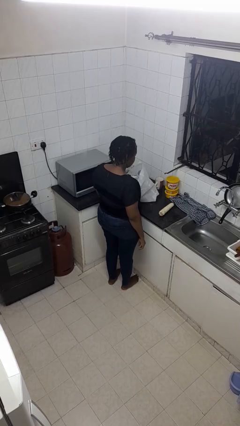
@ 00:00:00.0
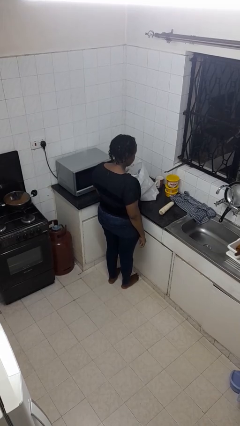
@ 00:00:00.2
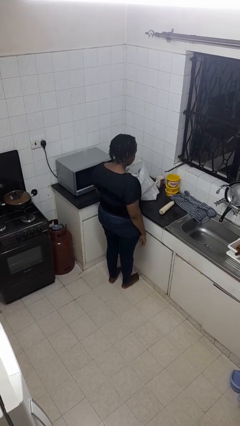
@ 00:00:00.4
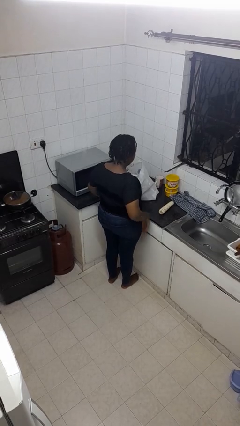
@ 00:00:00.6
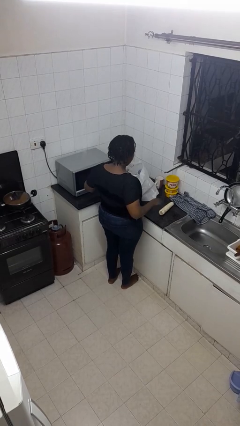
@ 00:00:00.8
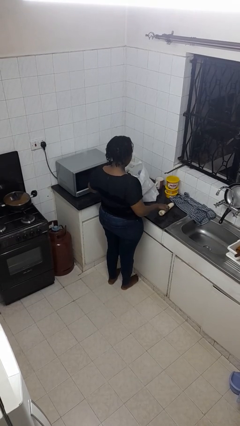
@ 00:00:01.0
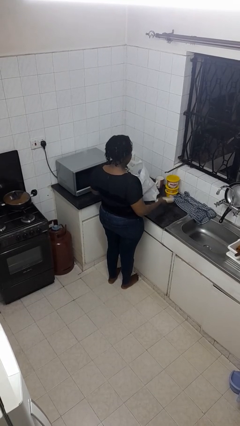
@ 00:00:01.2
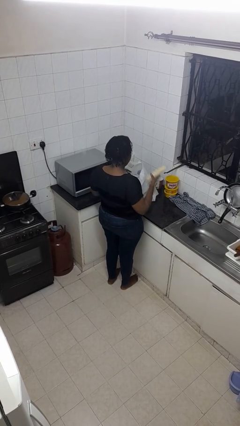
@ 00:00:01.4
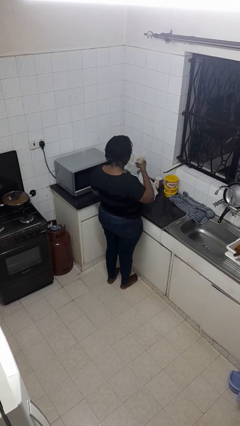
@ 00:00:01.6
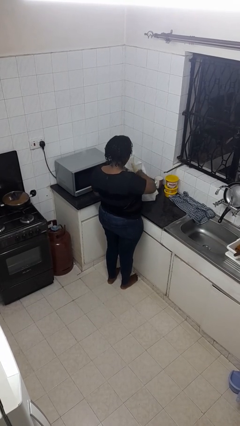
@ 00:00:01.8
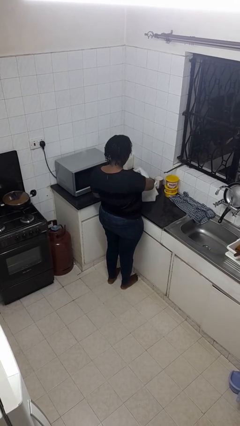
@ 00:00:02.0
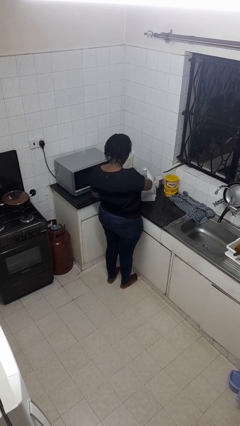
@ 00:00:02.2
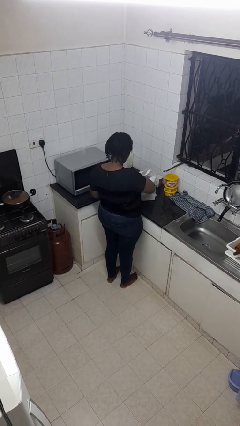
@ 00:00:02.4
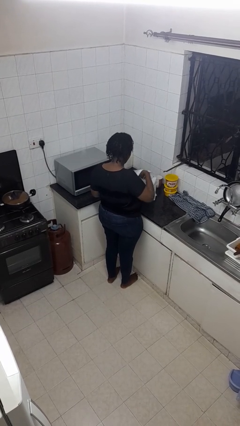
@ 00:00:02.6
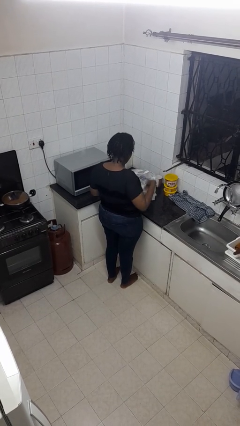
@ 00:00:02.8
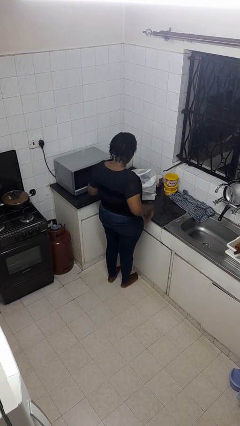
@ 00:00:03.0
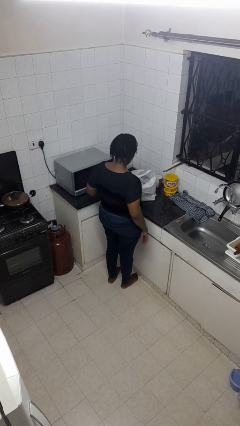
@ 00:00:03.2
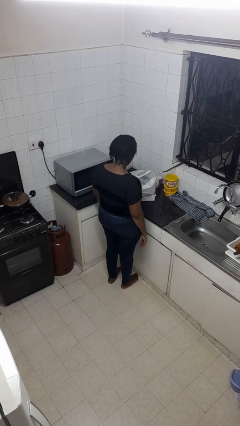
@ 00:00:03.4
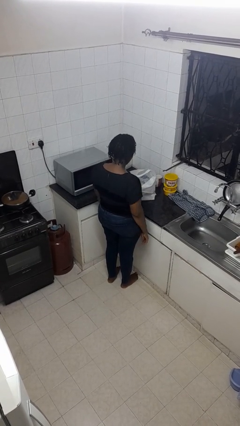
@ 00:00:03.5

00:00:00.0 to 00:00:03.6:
person puts object into bag

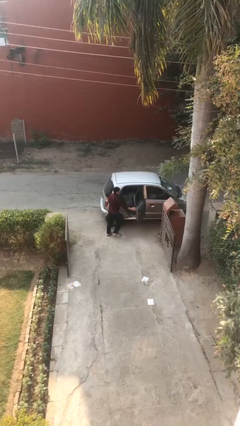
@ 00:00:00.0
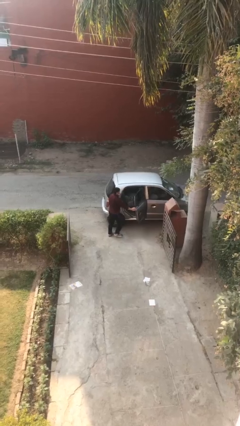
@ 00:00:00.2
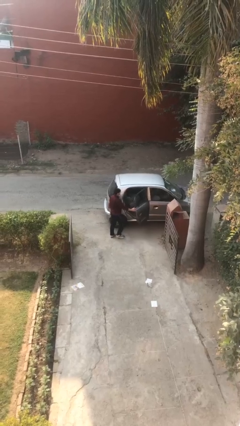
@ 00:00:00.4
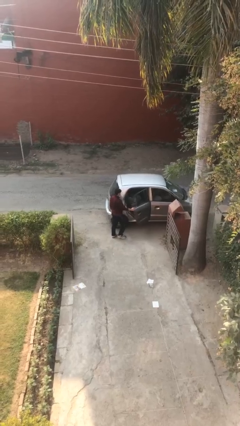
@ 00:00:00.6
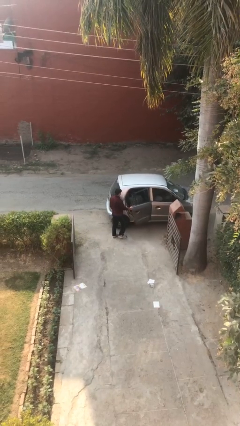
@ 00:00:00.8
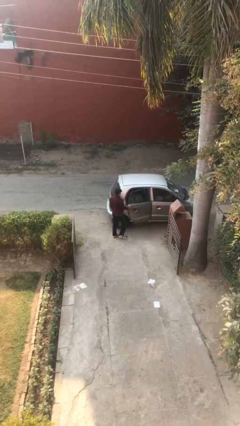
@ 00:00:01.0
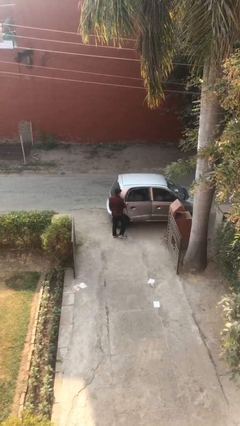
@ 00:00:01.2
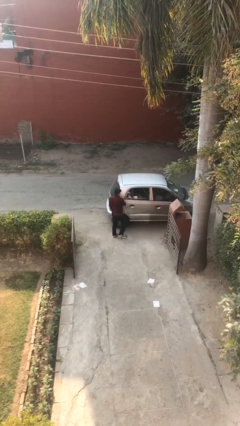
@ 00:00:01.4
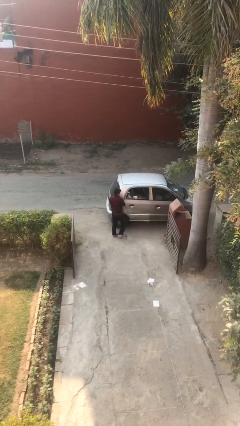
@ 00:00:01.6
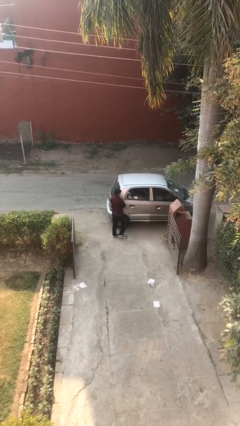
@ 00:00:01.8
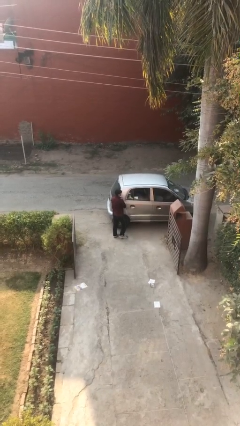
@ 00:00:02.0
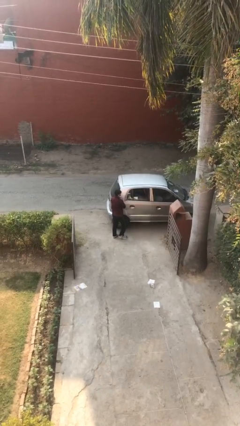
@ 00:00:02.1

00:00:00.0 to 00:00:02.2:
person closes car door

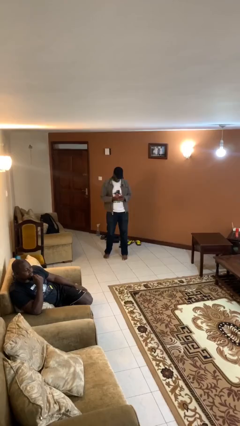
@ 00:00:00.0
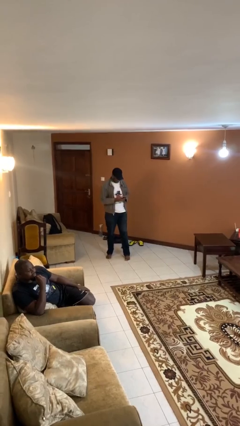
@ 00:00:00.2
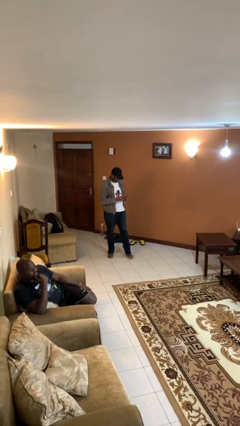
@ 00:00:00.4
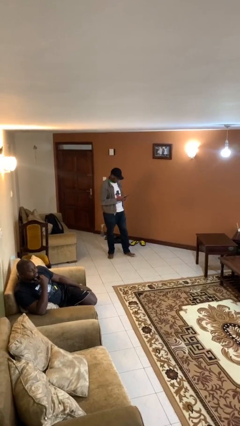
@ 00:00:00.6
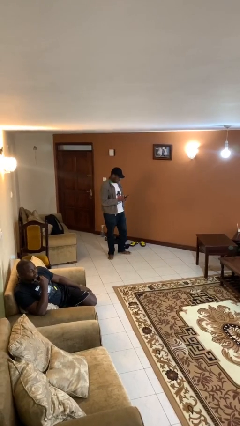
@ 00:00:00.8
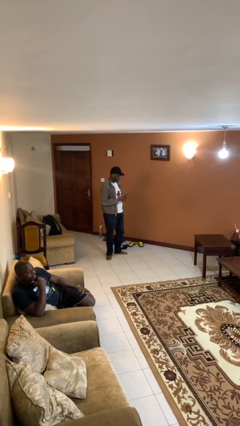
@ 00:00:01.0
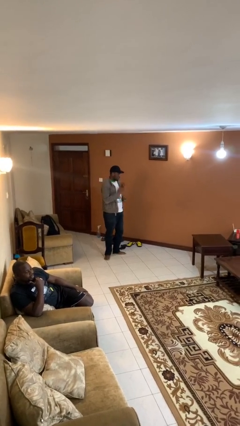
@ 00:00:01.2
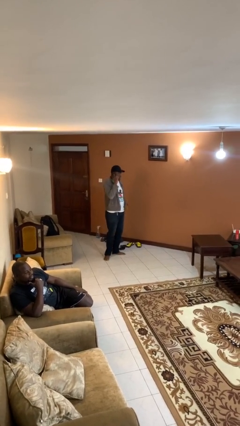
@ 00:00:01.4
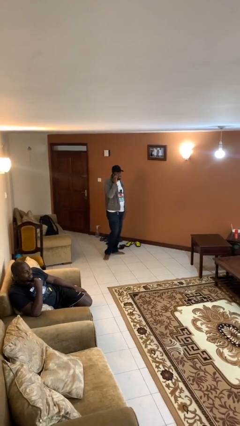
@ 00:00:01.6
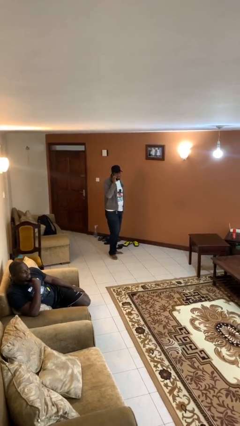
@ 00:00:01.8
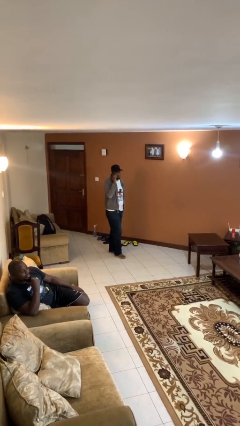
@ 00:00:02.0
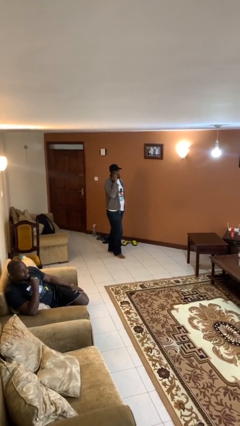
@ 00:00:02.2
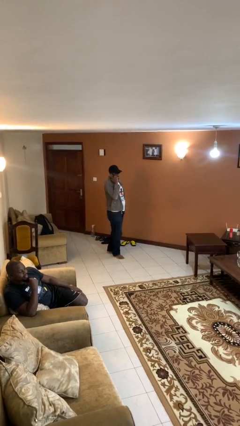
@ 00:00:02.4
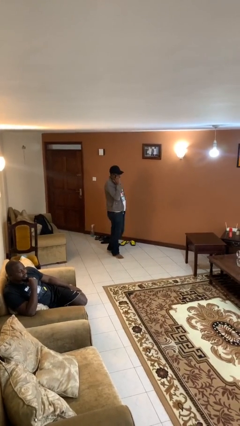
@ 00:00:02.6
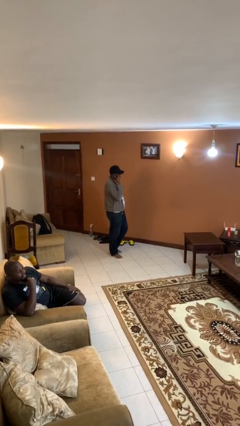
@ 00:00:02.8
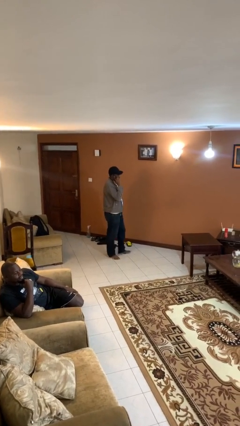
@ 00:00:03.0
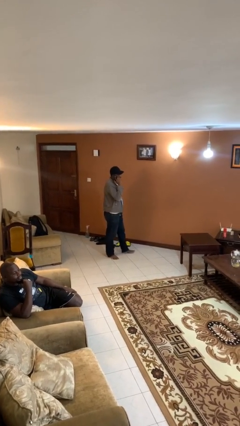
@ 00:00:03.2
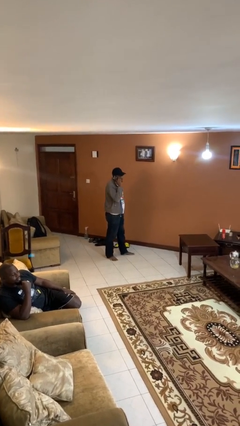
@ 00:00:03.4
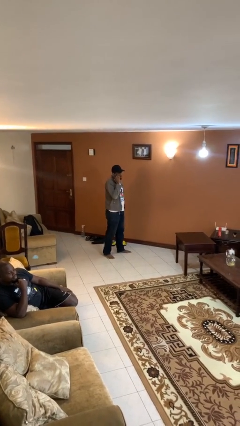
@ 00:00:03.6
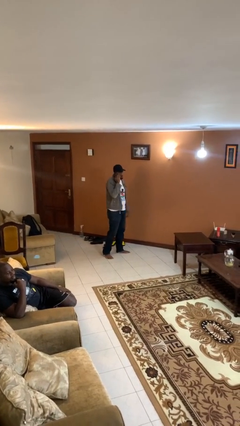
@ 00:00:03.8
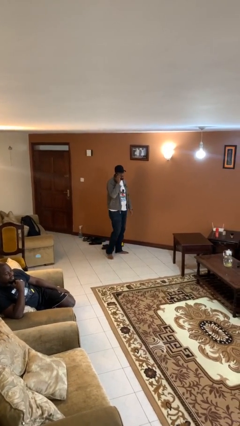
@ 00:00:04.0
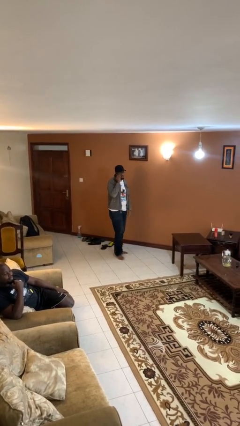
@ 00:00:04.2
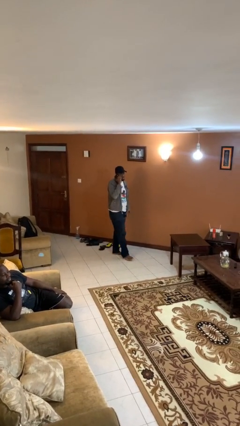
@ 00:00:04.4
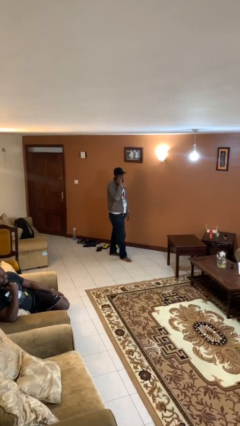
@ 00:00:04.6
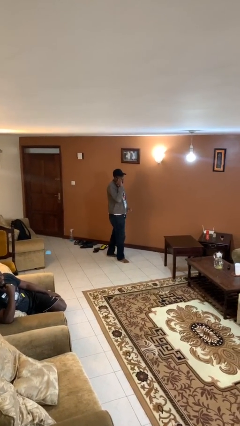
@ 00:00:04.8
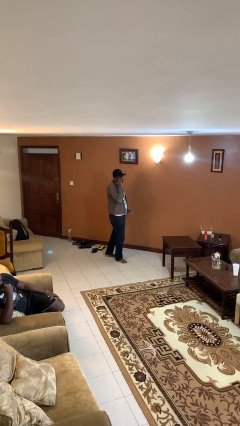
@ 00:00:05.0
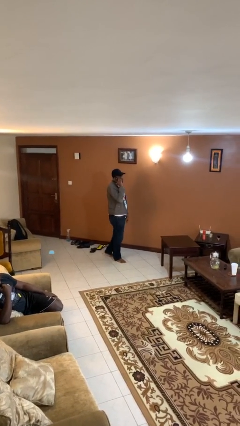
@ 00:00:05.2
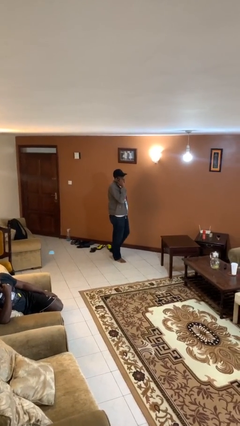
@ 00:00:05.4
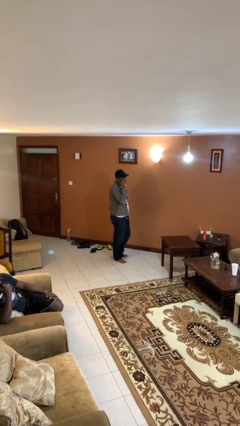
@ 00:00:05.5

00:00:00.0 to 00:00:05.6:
person talks on phone

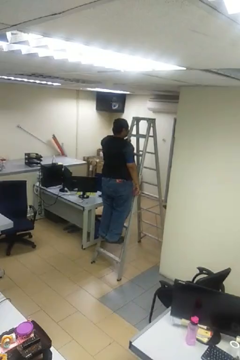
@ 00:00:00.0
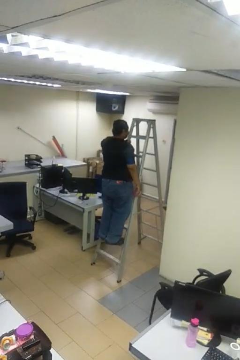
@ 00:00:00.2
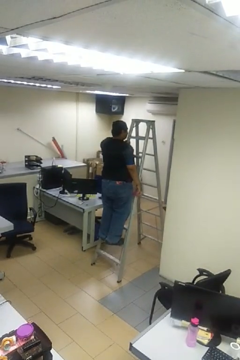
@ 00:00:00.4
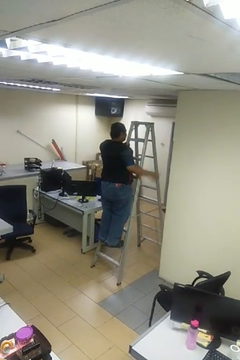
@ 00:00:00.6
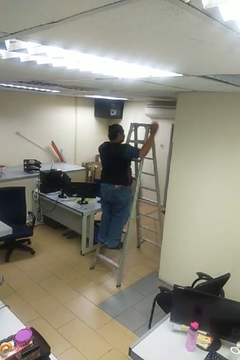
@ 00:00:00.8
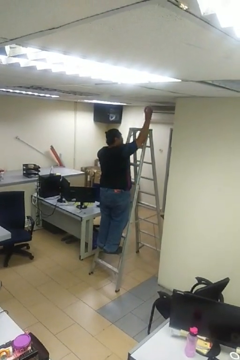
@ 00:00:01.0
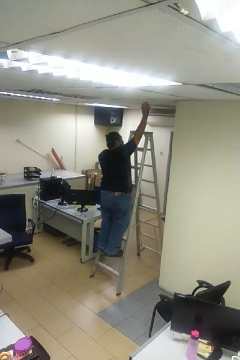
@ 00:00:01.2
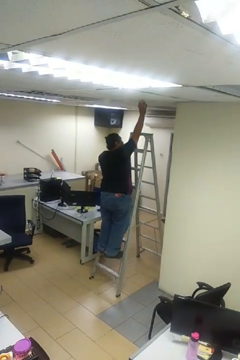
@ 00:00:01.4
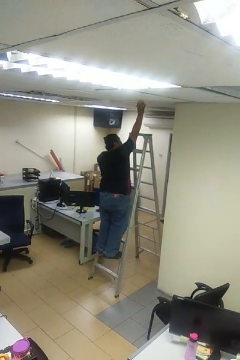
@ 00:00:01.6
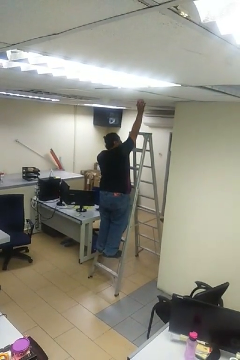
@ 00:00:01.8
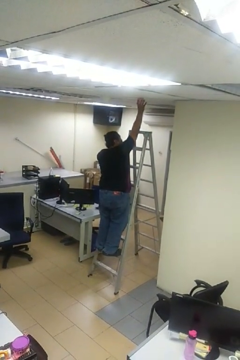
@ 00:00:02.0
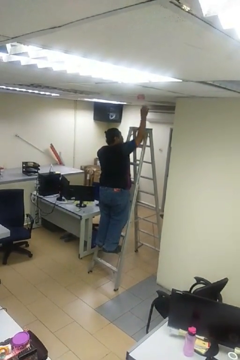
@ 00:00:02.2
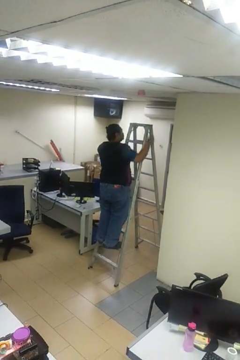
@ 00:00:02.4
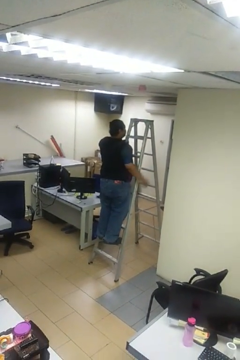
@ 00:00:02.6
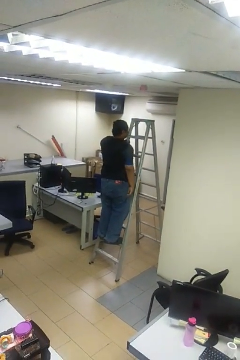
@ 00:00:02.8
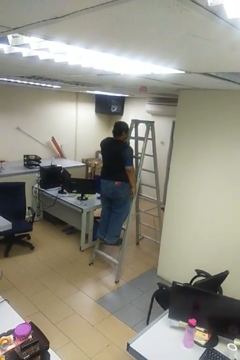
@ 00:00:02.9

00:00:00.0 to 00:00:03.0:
person puts up smoke detector

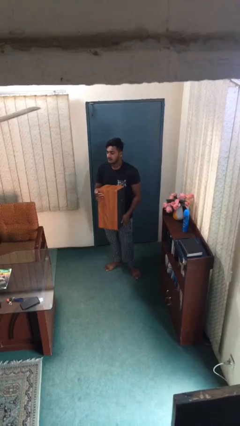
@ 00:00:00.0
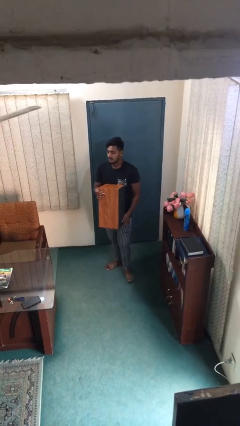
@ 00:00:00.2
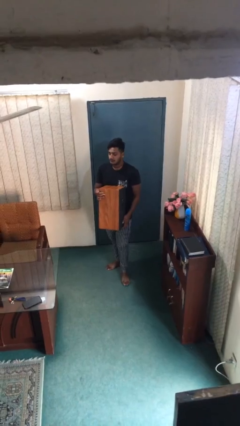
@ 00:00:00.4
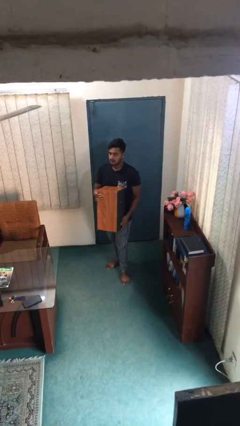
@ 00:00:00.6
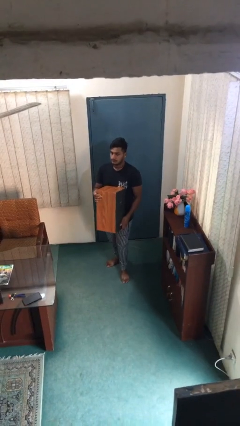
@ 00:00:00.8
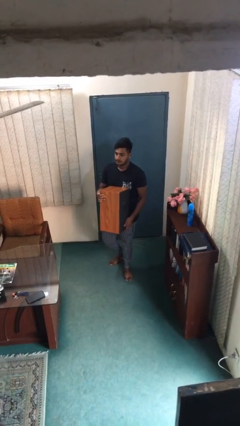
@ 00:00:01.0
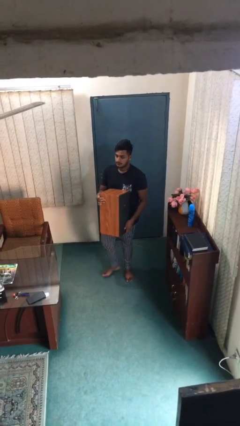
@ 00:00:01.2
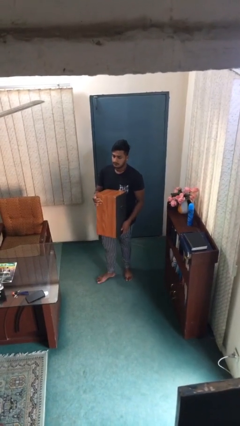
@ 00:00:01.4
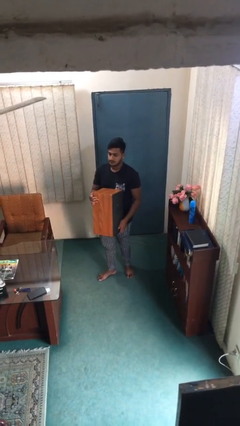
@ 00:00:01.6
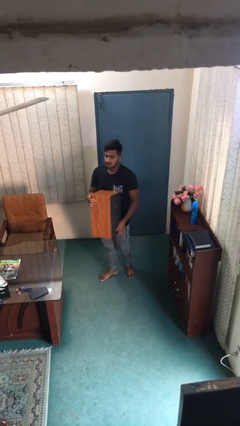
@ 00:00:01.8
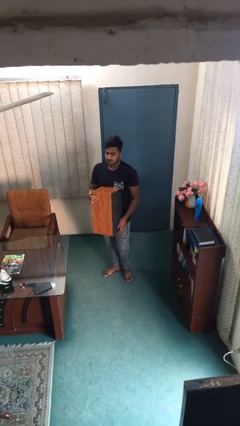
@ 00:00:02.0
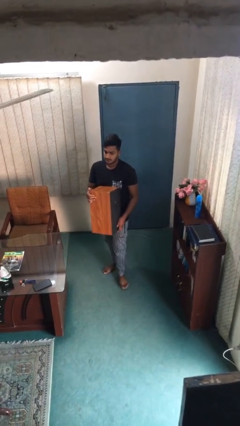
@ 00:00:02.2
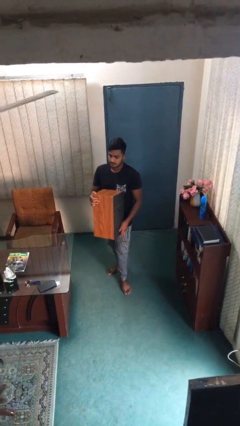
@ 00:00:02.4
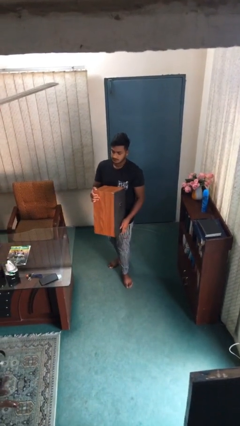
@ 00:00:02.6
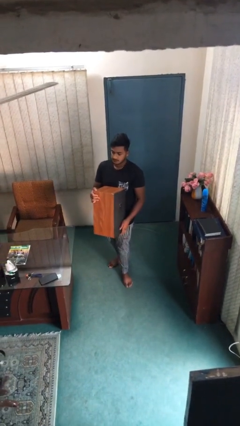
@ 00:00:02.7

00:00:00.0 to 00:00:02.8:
person carries heavy object

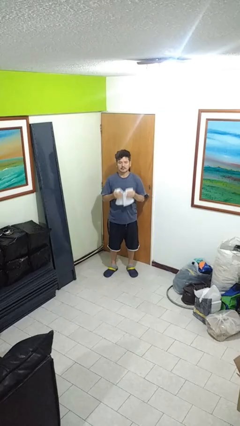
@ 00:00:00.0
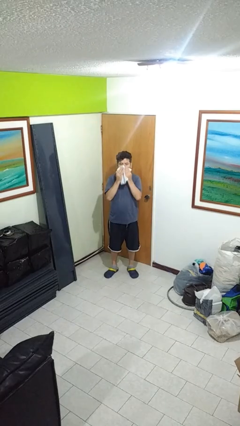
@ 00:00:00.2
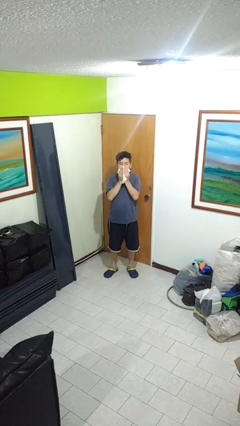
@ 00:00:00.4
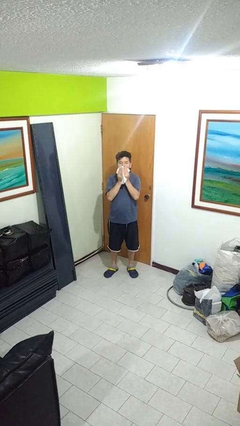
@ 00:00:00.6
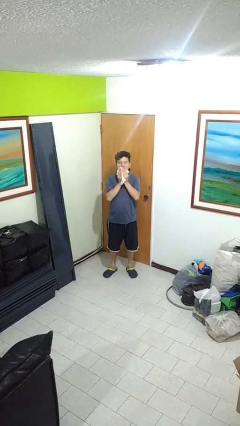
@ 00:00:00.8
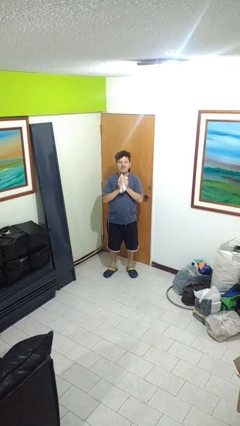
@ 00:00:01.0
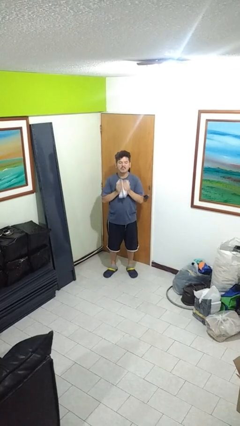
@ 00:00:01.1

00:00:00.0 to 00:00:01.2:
person wipes mouth with napkin
